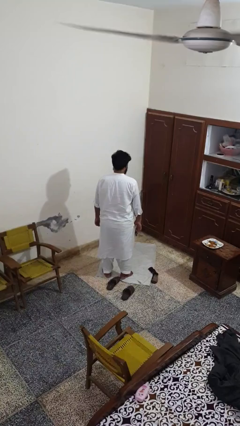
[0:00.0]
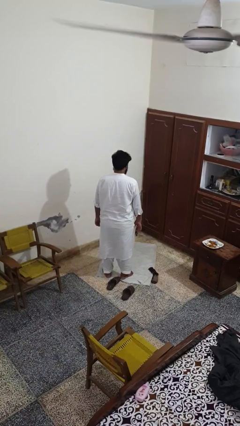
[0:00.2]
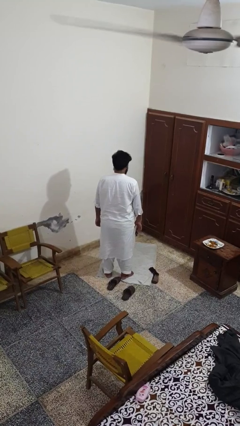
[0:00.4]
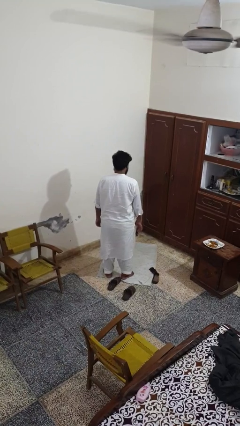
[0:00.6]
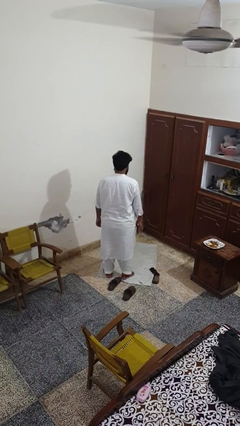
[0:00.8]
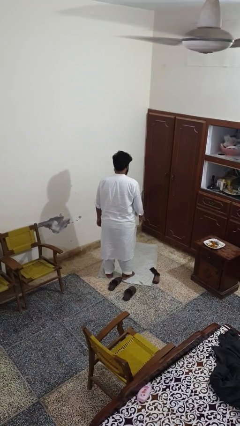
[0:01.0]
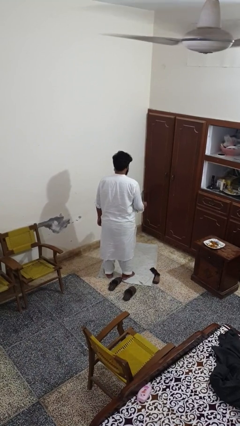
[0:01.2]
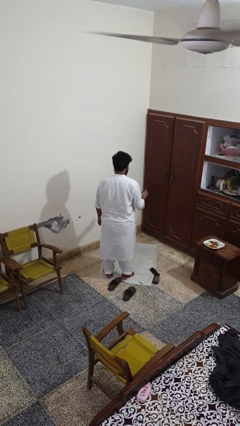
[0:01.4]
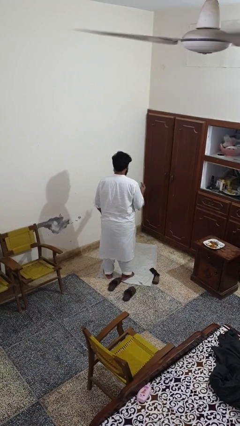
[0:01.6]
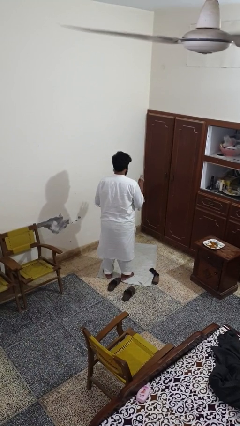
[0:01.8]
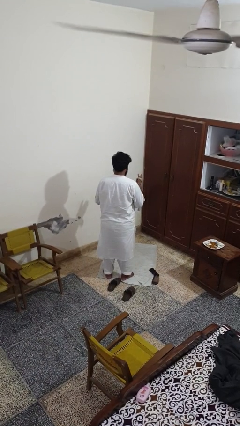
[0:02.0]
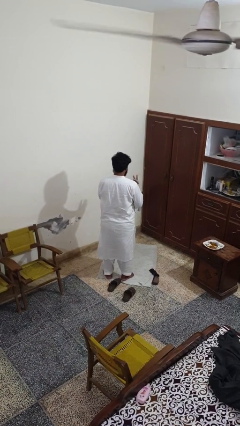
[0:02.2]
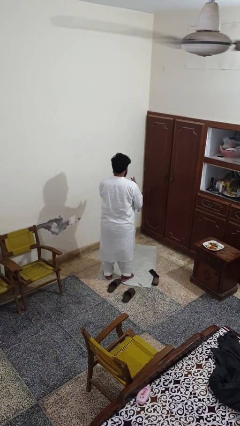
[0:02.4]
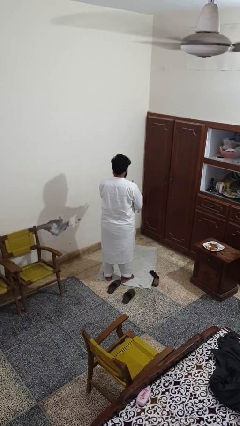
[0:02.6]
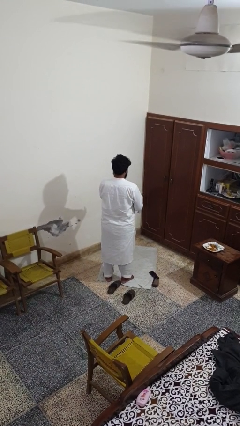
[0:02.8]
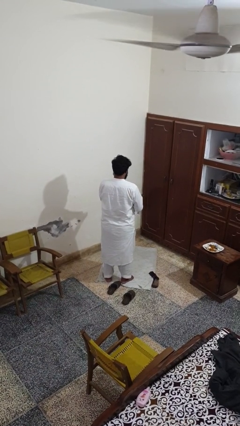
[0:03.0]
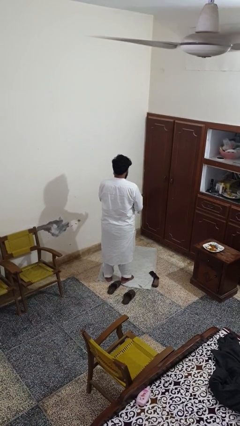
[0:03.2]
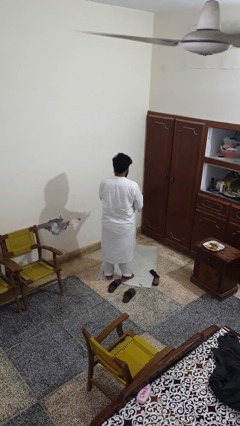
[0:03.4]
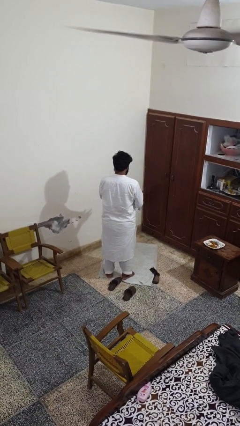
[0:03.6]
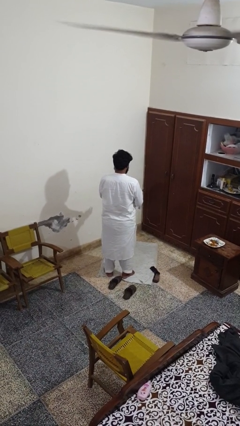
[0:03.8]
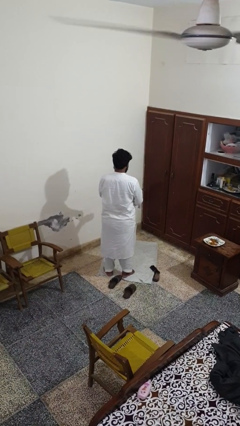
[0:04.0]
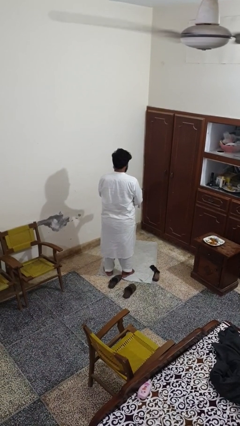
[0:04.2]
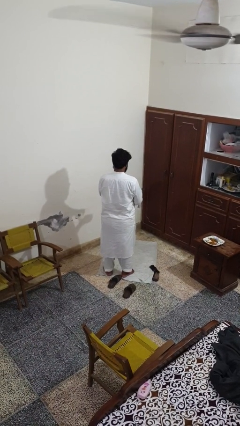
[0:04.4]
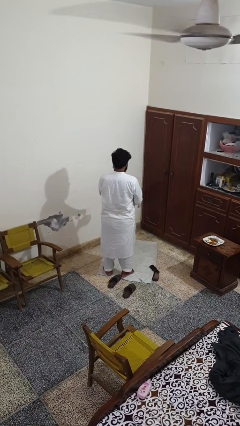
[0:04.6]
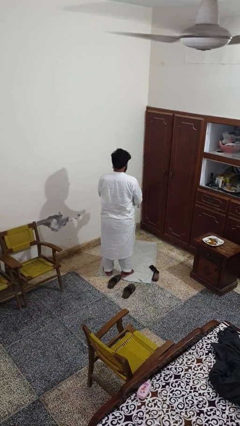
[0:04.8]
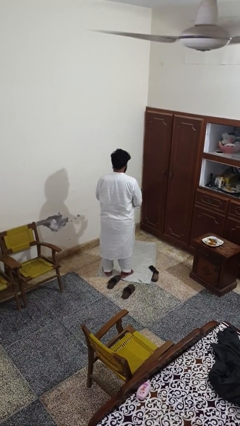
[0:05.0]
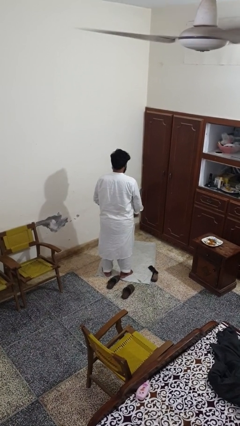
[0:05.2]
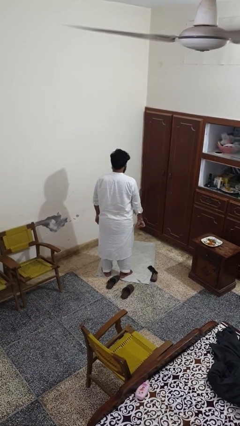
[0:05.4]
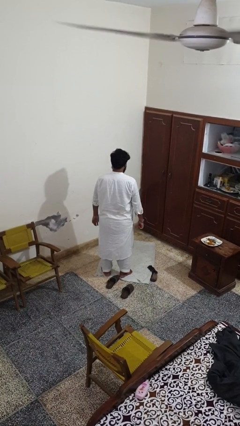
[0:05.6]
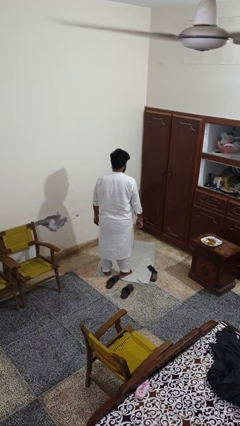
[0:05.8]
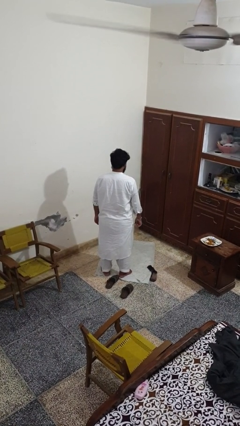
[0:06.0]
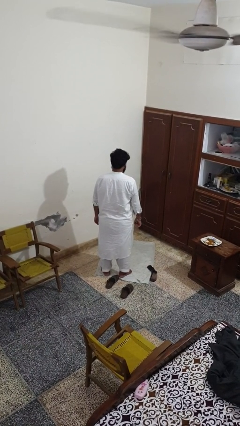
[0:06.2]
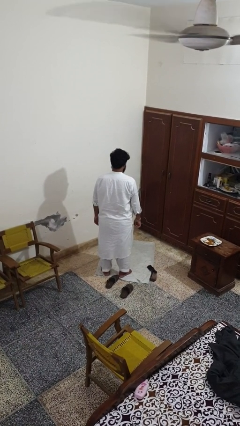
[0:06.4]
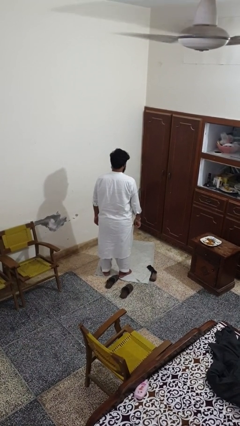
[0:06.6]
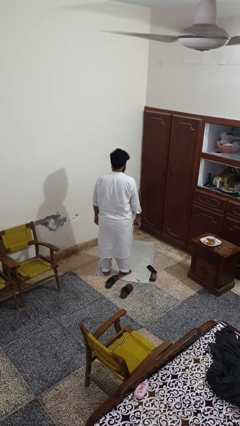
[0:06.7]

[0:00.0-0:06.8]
person puts on wristwatch

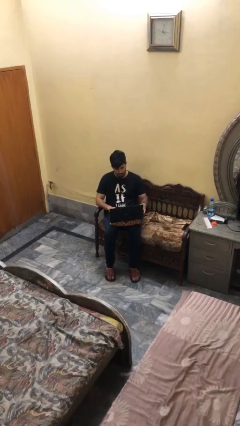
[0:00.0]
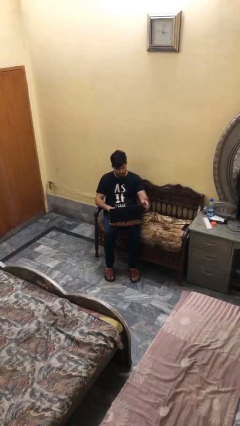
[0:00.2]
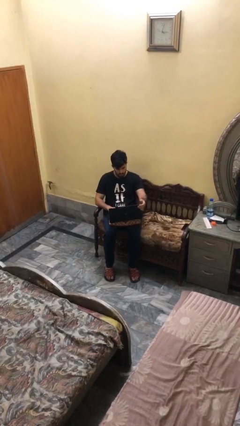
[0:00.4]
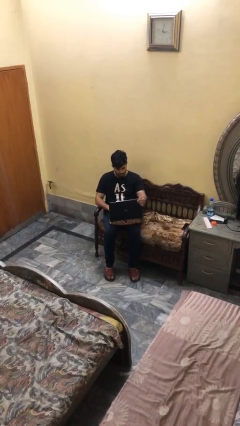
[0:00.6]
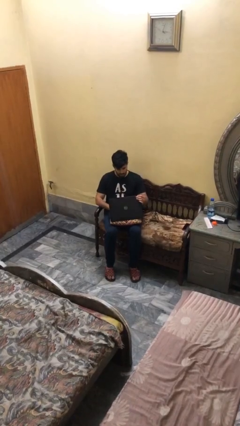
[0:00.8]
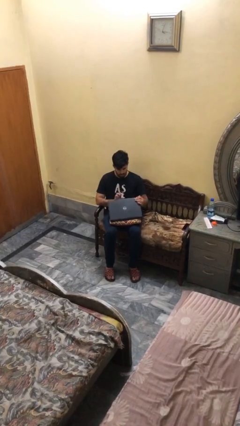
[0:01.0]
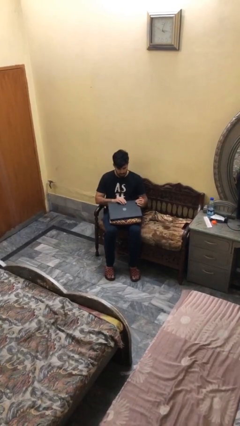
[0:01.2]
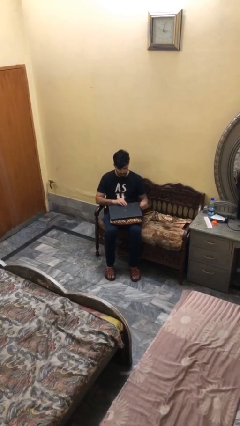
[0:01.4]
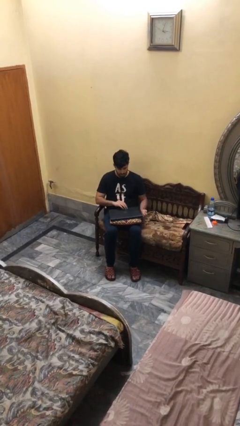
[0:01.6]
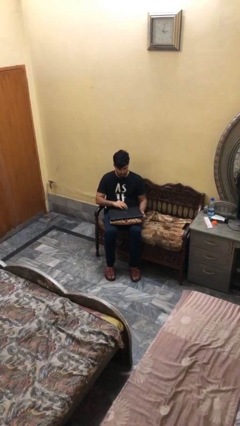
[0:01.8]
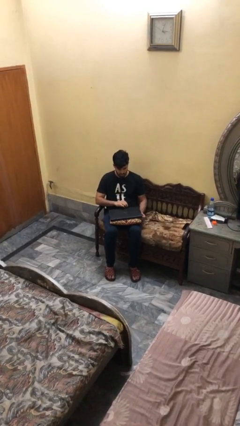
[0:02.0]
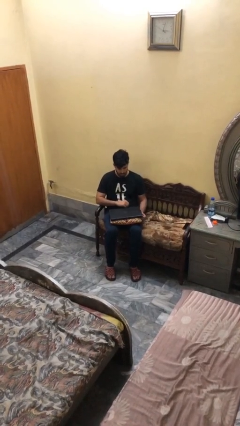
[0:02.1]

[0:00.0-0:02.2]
person closes laptop

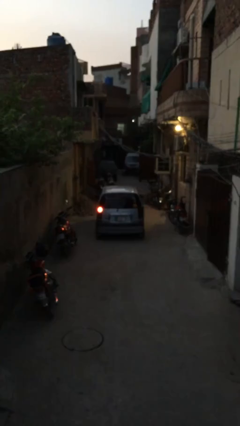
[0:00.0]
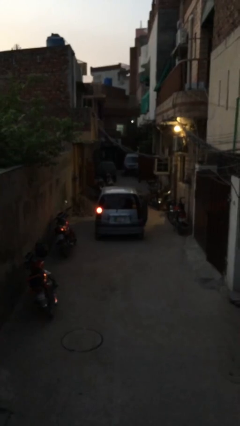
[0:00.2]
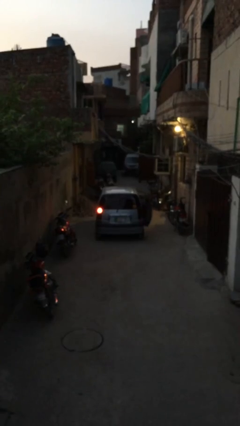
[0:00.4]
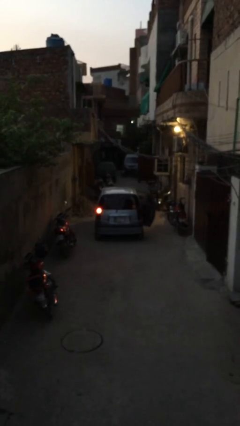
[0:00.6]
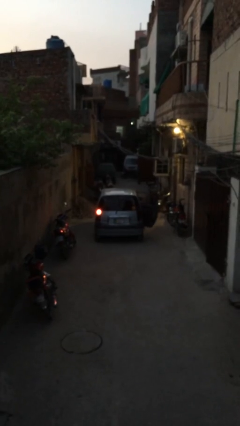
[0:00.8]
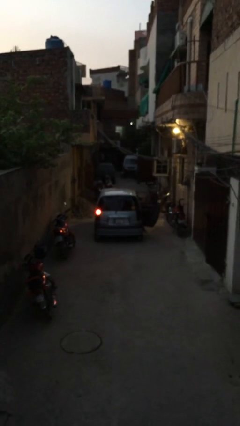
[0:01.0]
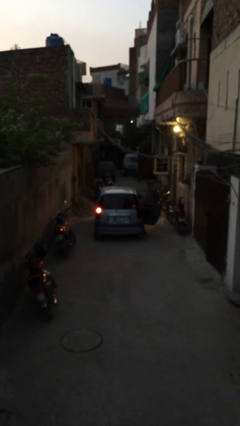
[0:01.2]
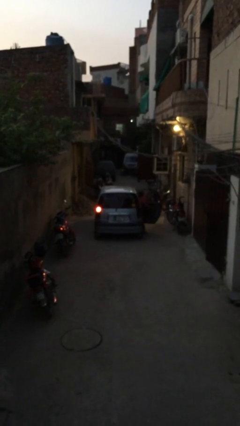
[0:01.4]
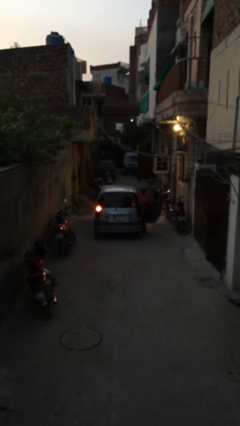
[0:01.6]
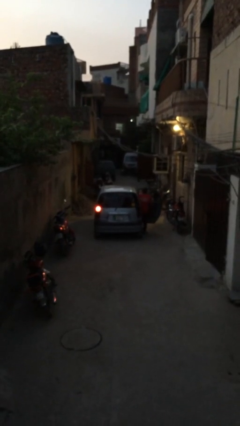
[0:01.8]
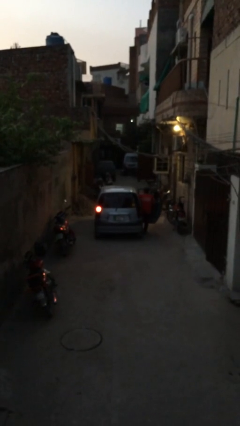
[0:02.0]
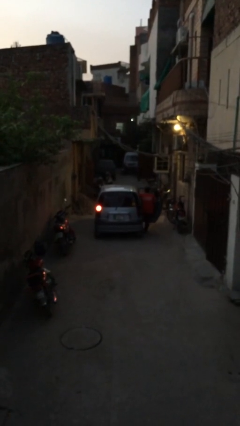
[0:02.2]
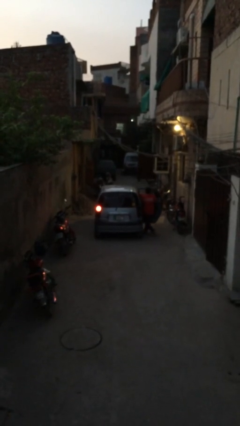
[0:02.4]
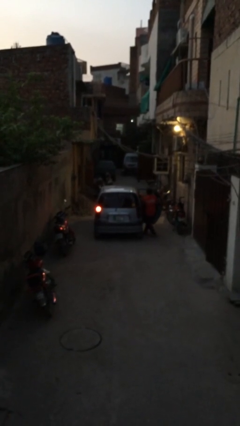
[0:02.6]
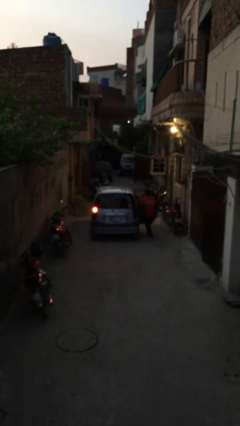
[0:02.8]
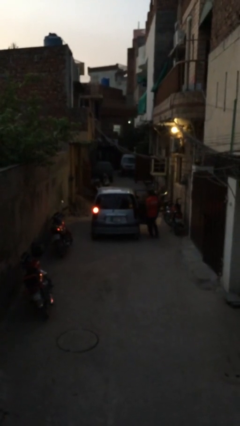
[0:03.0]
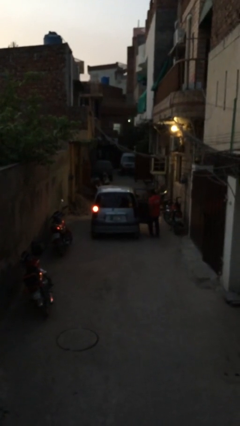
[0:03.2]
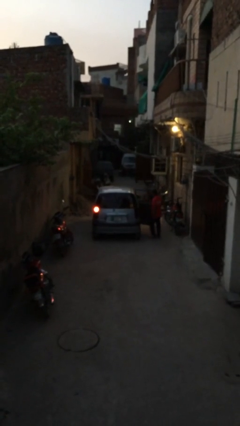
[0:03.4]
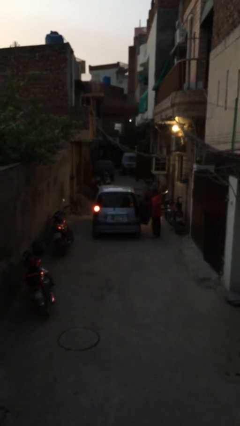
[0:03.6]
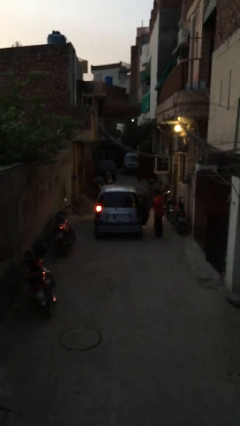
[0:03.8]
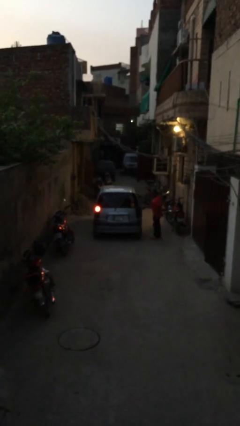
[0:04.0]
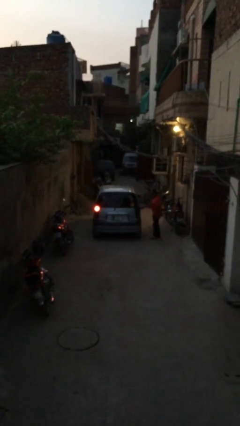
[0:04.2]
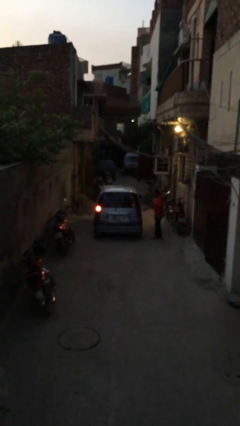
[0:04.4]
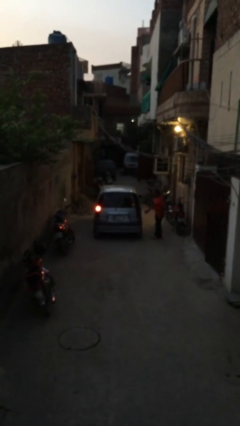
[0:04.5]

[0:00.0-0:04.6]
car drops off person

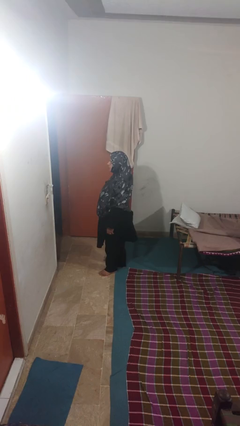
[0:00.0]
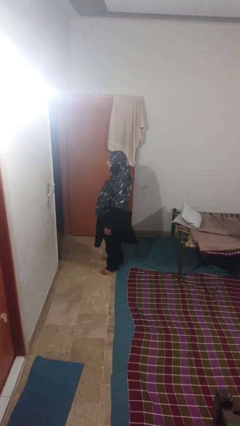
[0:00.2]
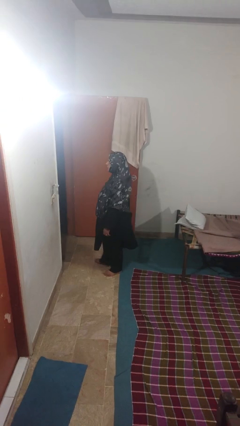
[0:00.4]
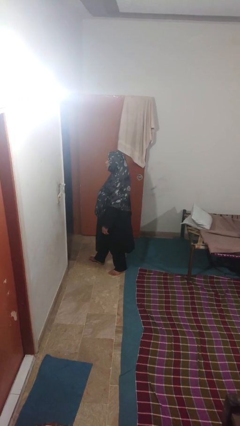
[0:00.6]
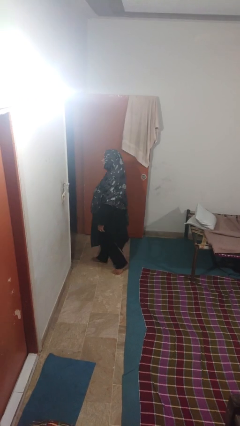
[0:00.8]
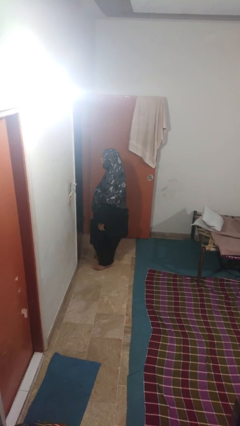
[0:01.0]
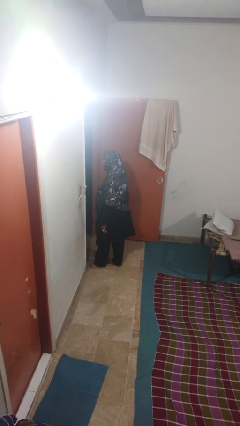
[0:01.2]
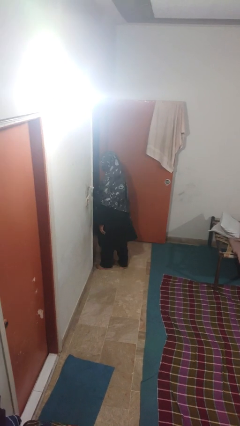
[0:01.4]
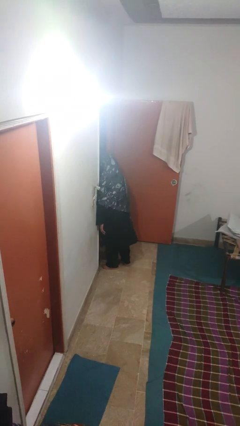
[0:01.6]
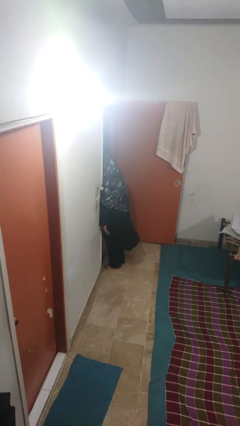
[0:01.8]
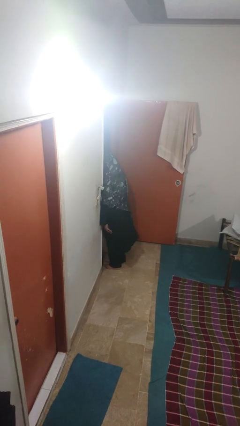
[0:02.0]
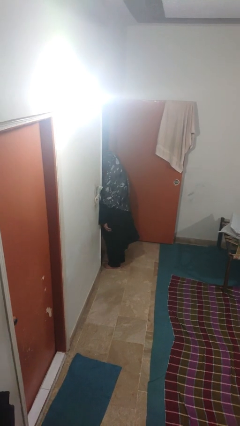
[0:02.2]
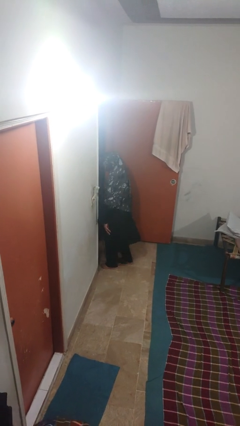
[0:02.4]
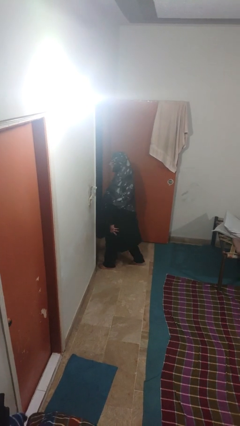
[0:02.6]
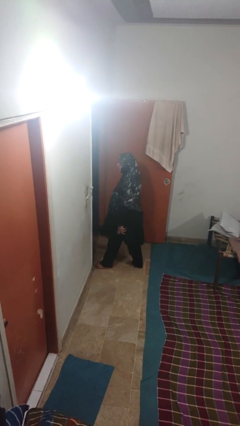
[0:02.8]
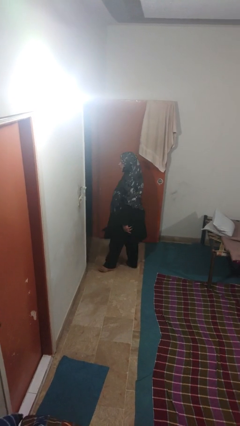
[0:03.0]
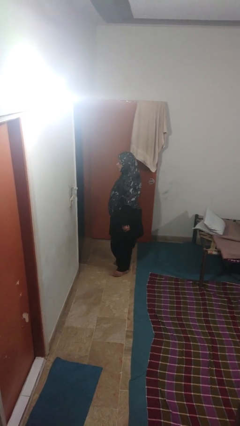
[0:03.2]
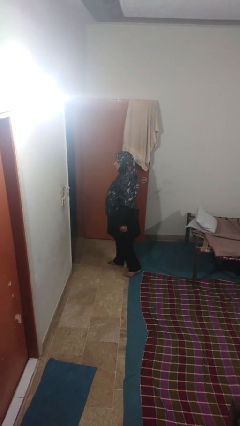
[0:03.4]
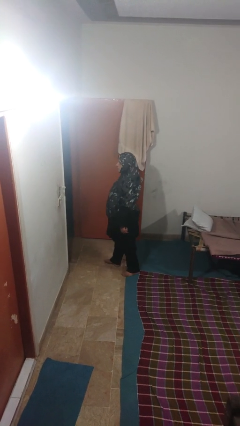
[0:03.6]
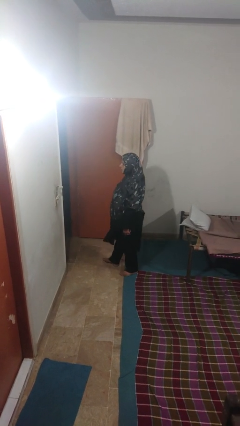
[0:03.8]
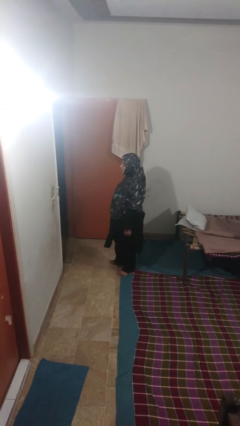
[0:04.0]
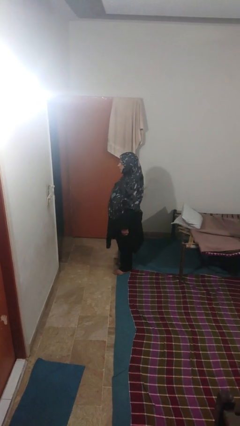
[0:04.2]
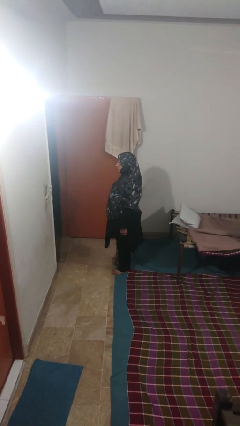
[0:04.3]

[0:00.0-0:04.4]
person bumps into wall
